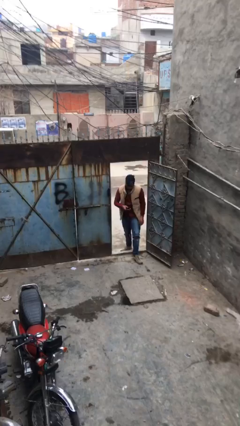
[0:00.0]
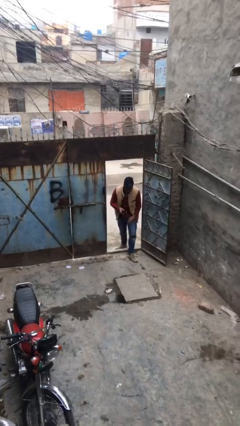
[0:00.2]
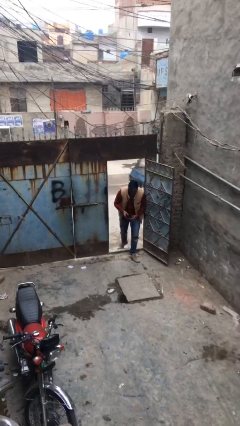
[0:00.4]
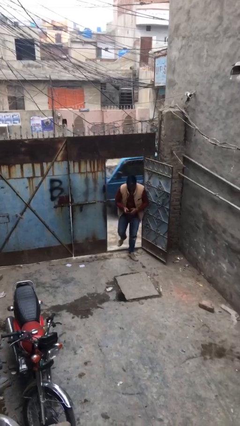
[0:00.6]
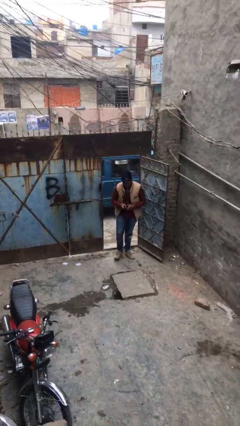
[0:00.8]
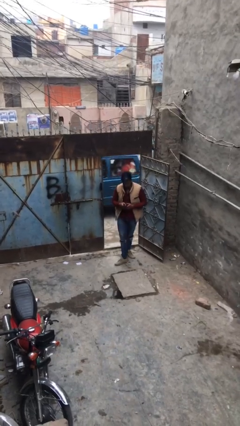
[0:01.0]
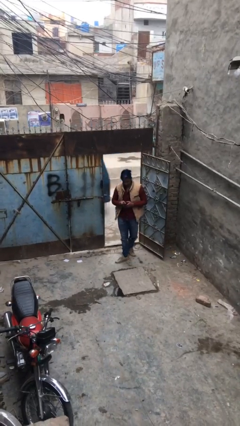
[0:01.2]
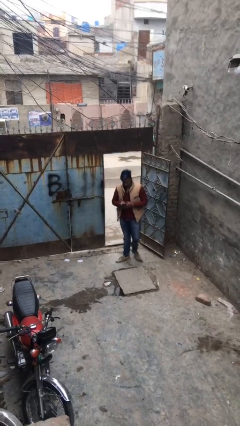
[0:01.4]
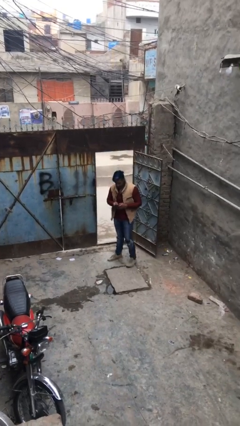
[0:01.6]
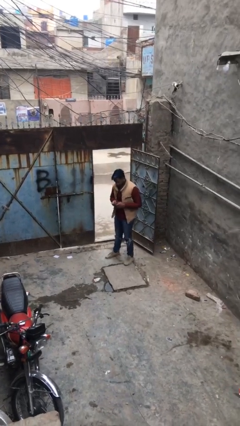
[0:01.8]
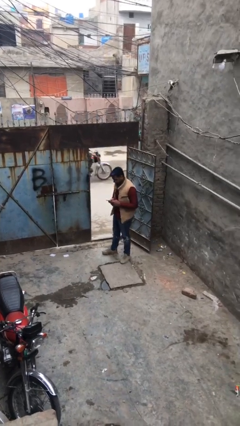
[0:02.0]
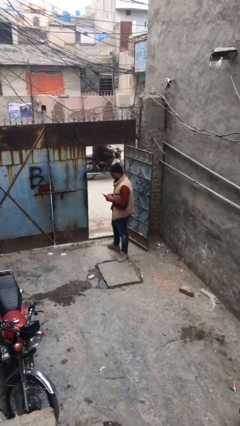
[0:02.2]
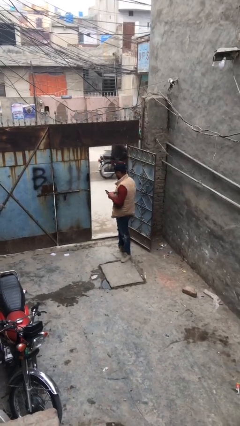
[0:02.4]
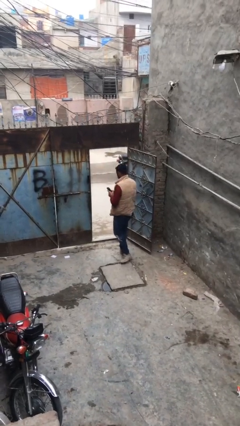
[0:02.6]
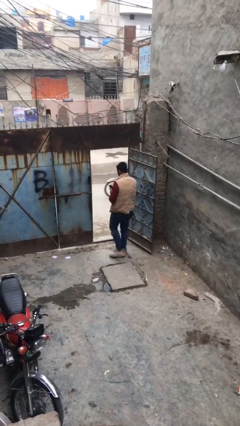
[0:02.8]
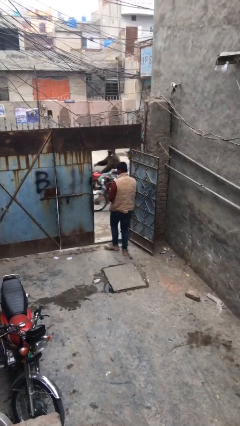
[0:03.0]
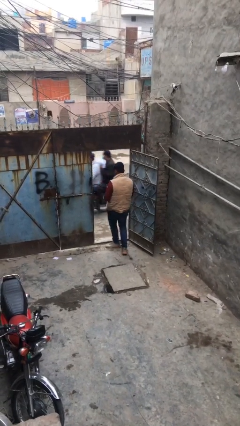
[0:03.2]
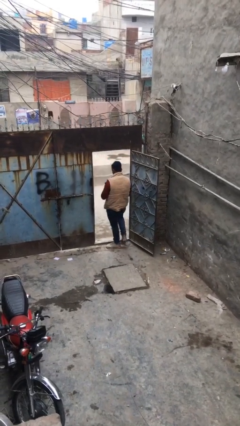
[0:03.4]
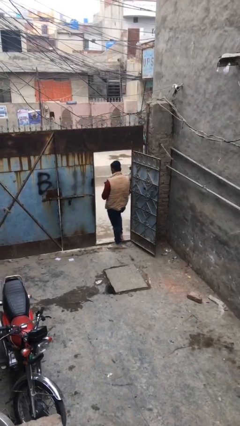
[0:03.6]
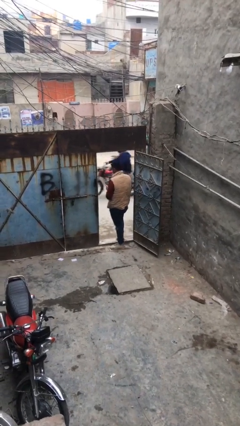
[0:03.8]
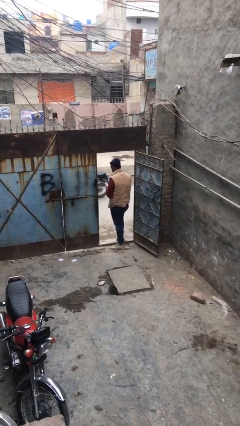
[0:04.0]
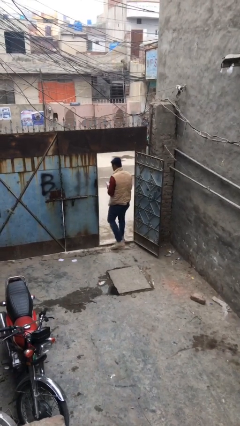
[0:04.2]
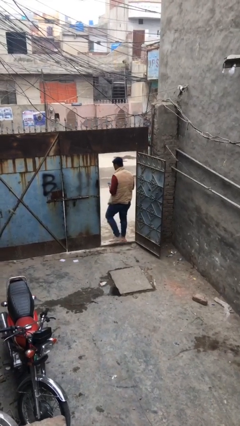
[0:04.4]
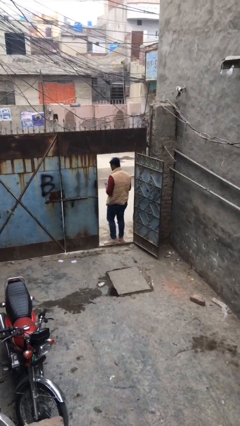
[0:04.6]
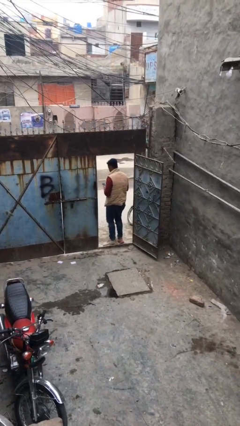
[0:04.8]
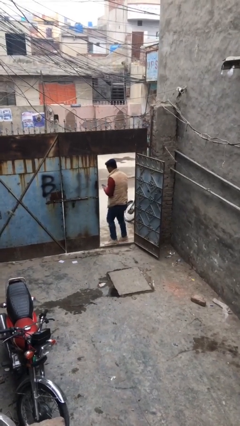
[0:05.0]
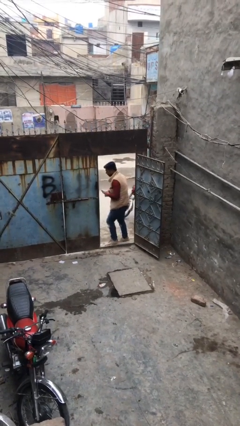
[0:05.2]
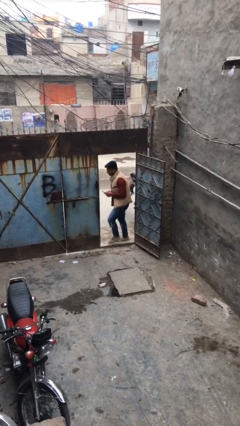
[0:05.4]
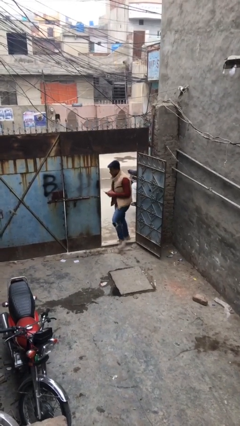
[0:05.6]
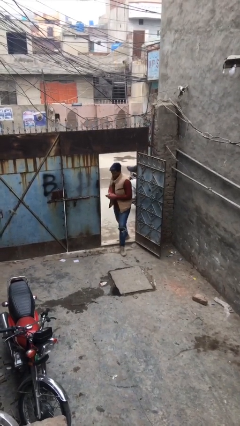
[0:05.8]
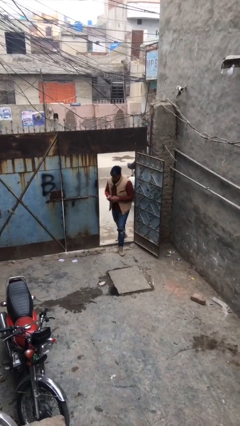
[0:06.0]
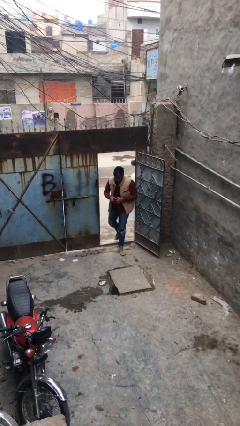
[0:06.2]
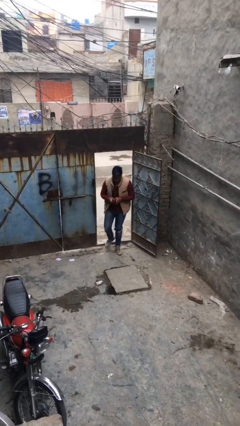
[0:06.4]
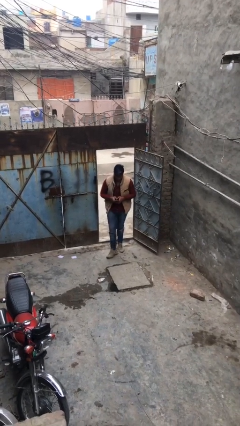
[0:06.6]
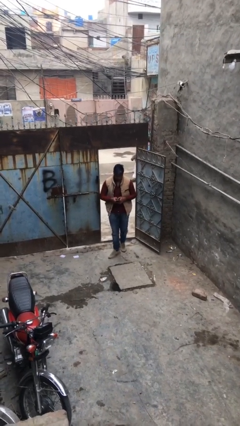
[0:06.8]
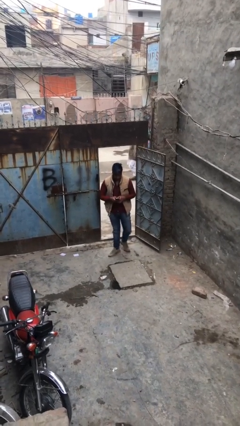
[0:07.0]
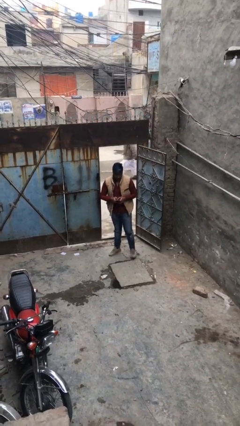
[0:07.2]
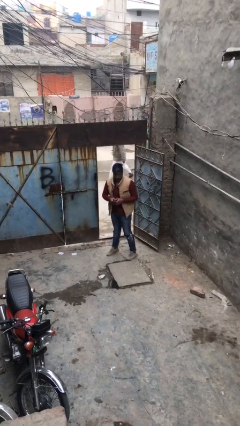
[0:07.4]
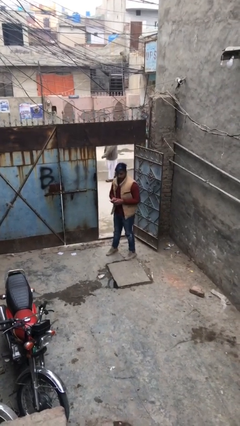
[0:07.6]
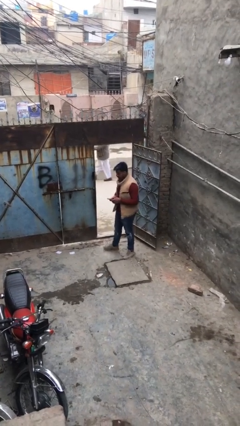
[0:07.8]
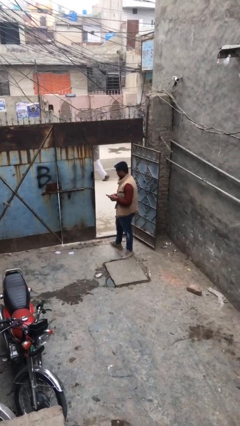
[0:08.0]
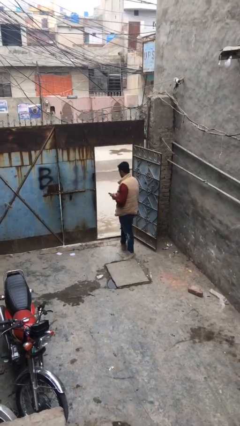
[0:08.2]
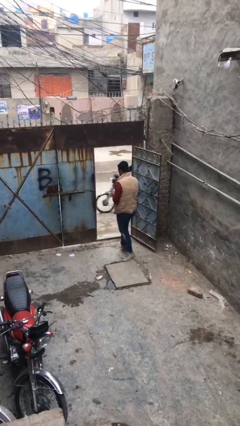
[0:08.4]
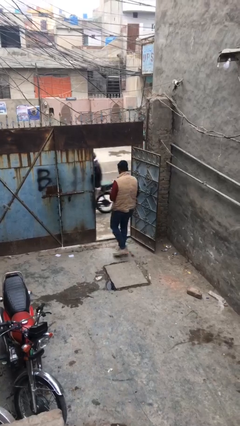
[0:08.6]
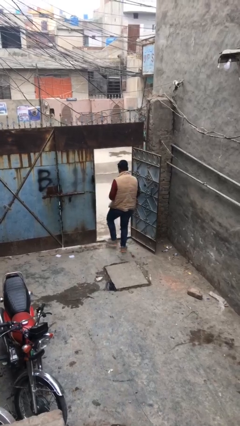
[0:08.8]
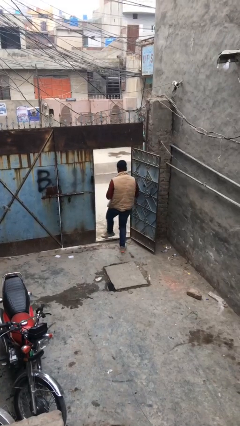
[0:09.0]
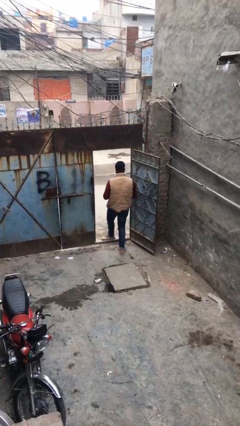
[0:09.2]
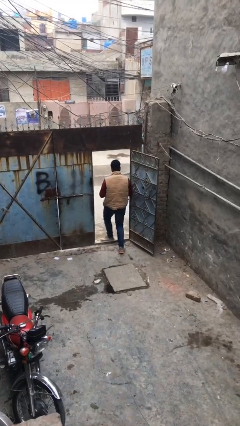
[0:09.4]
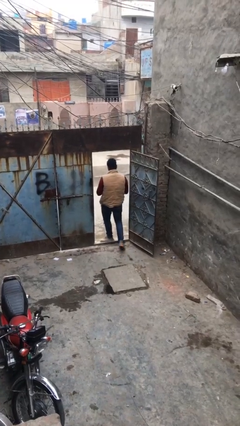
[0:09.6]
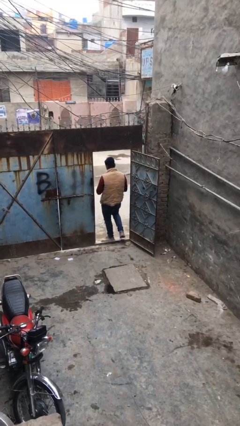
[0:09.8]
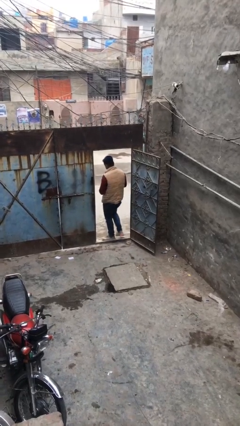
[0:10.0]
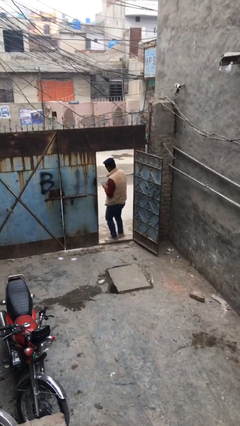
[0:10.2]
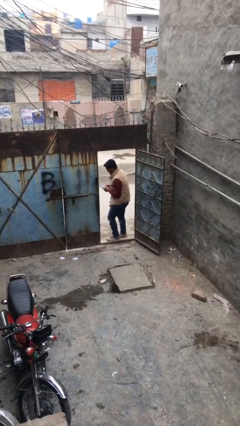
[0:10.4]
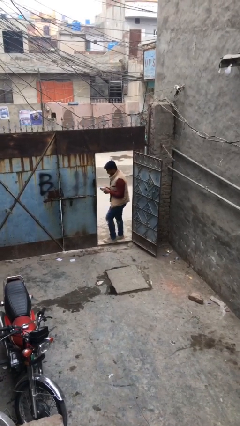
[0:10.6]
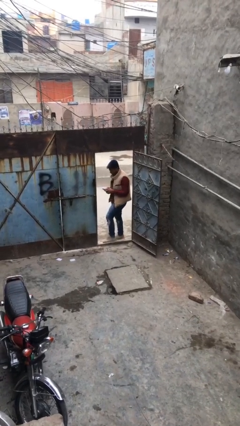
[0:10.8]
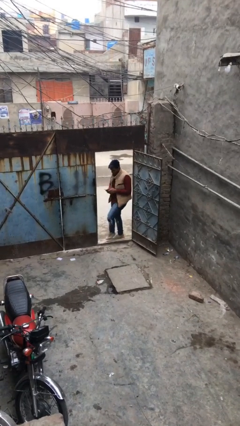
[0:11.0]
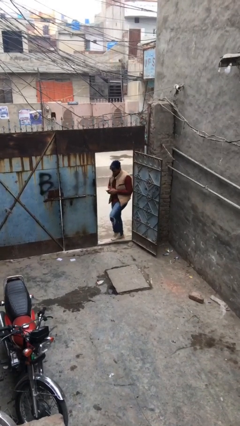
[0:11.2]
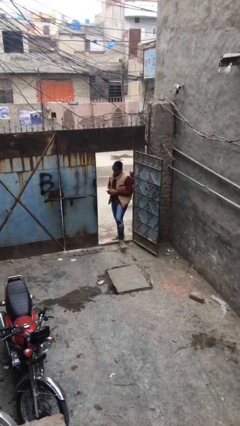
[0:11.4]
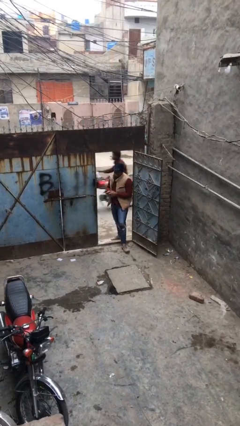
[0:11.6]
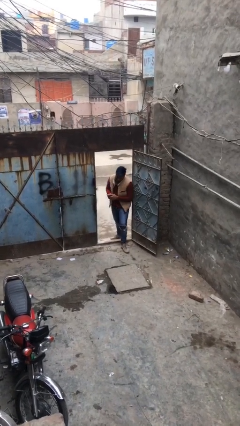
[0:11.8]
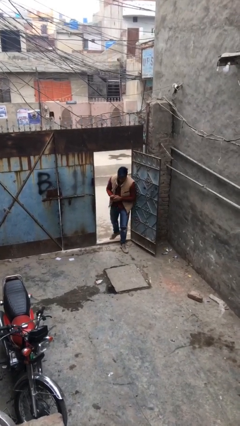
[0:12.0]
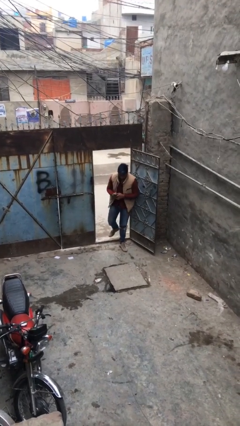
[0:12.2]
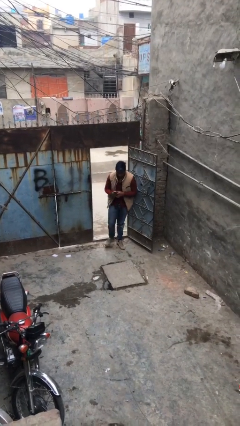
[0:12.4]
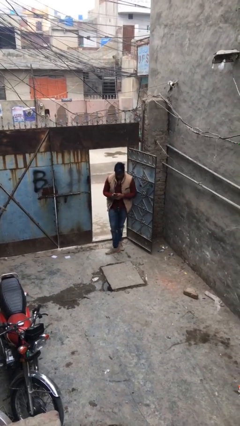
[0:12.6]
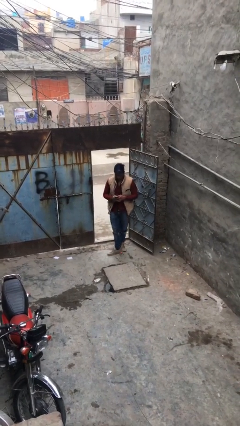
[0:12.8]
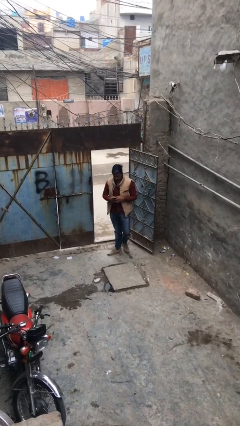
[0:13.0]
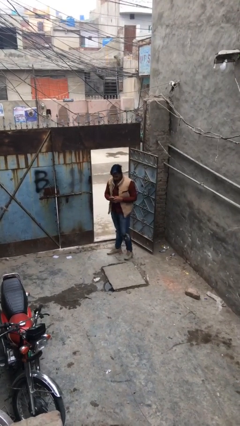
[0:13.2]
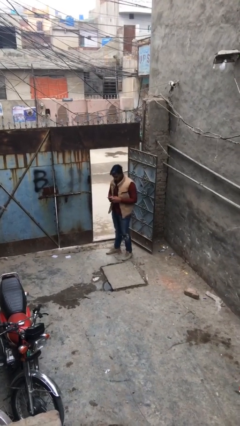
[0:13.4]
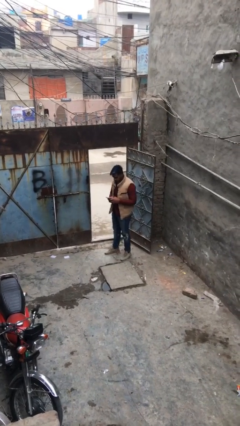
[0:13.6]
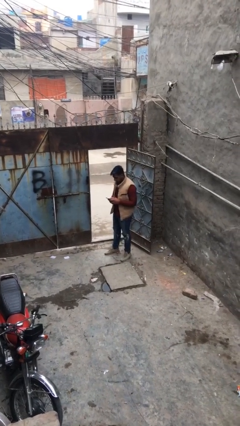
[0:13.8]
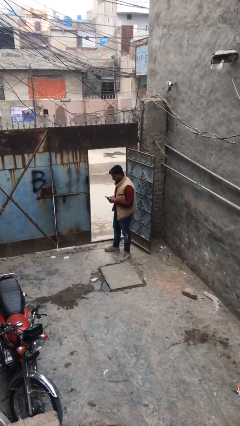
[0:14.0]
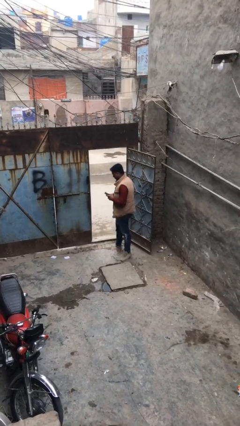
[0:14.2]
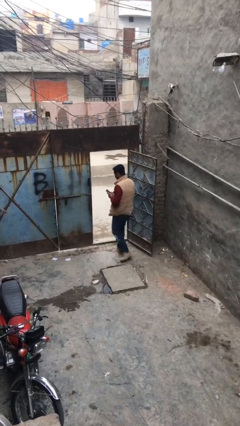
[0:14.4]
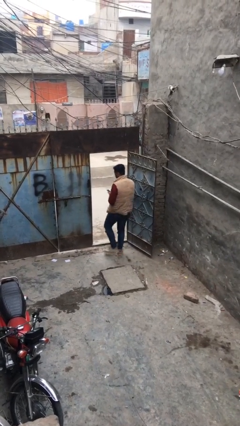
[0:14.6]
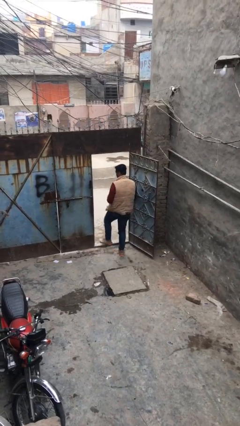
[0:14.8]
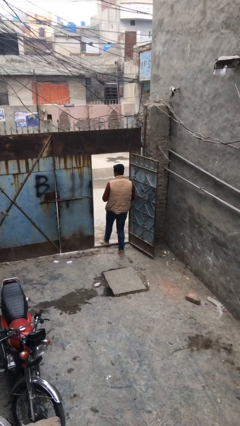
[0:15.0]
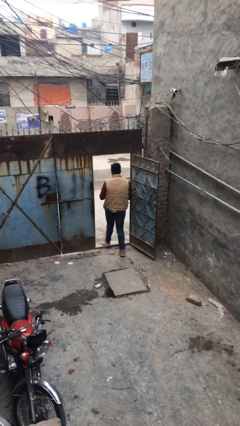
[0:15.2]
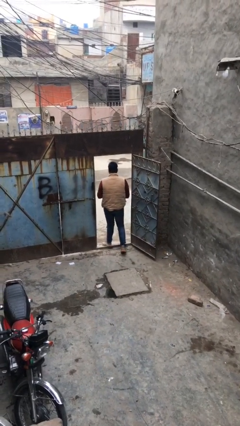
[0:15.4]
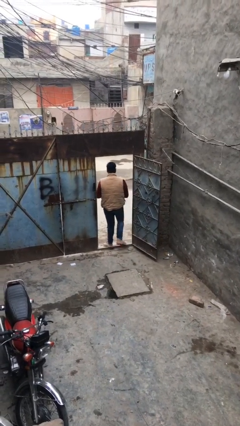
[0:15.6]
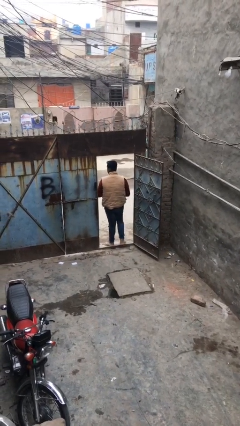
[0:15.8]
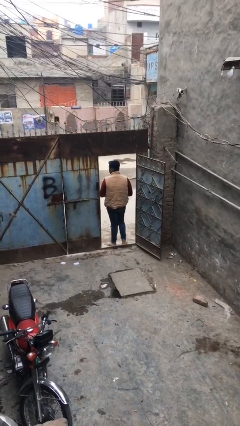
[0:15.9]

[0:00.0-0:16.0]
person texts on phone

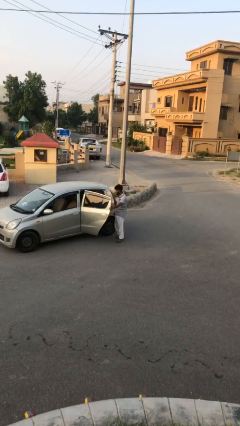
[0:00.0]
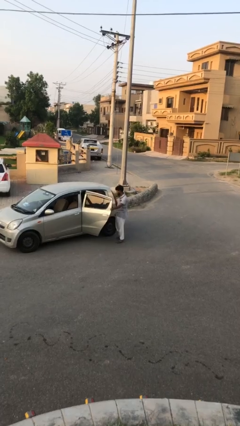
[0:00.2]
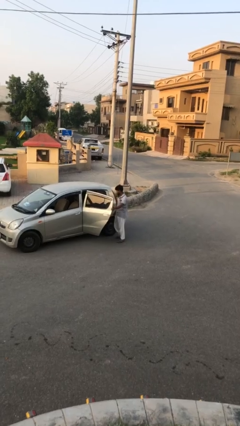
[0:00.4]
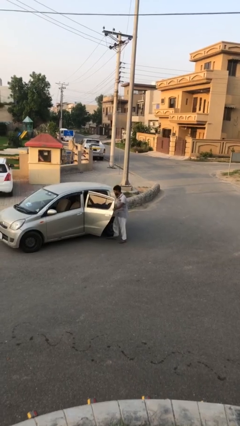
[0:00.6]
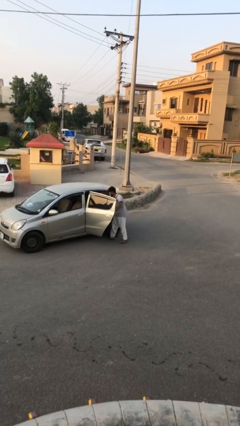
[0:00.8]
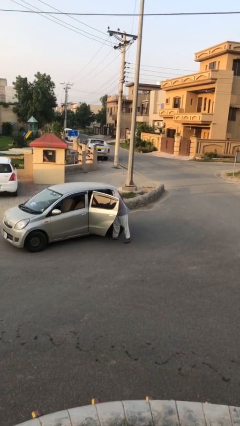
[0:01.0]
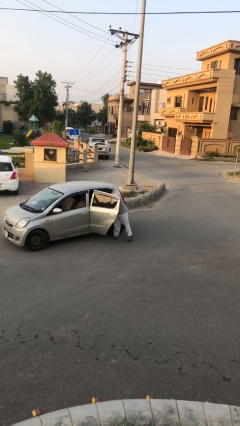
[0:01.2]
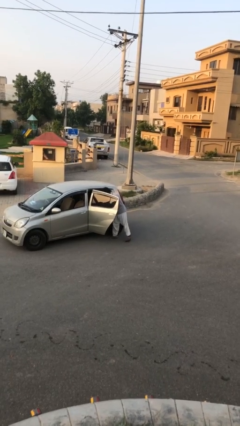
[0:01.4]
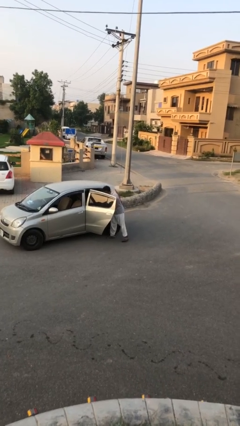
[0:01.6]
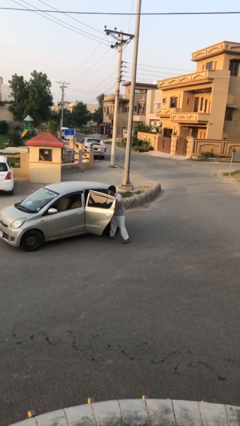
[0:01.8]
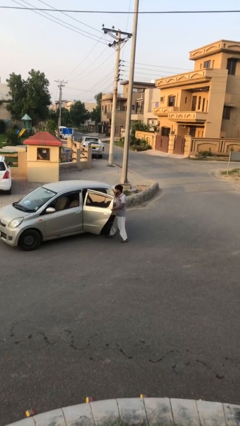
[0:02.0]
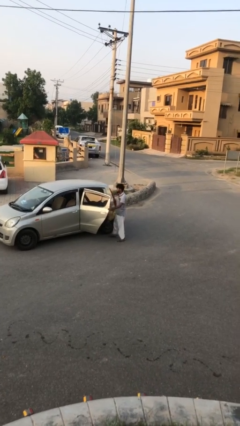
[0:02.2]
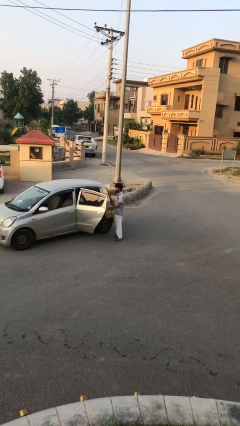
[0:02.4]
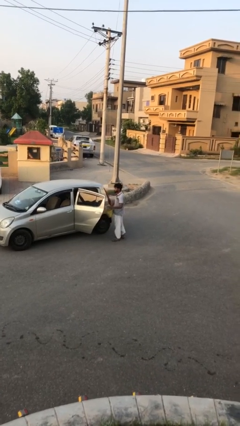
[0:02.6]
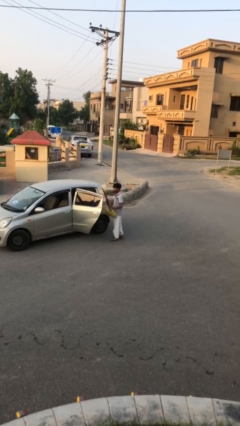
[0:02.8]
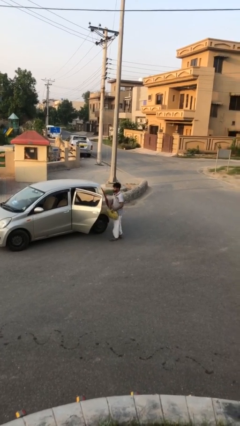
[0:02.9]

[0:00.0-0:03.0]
person unloads car
